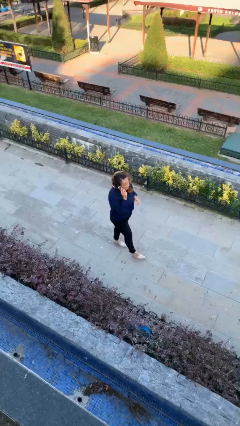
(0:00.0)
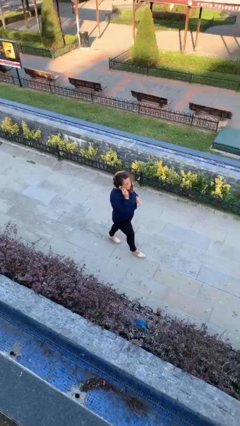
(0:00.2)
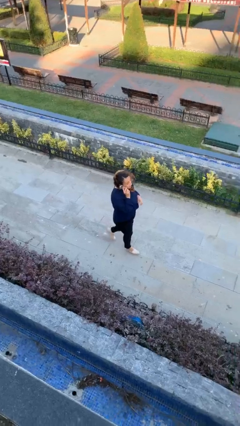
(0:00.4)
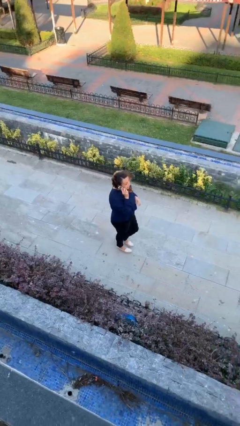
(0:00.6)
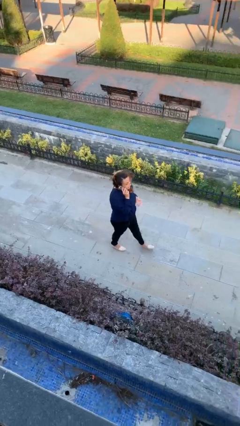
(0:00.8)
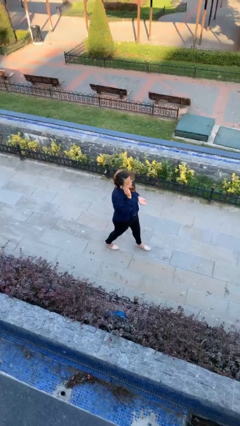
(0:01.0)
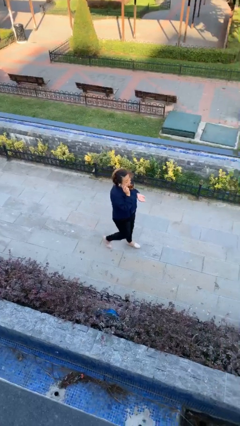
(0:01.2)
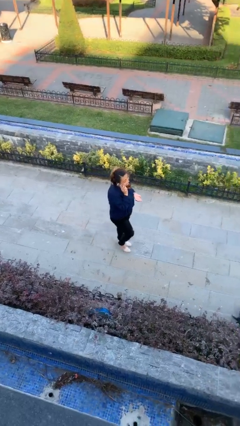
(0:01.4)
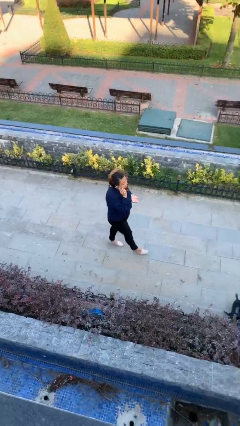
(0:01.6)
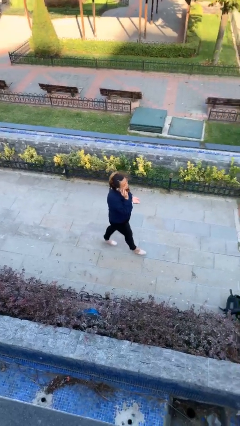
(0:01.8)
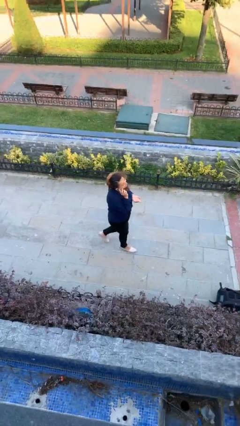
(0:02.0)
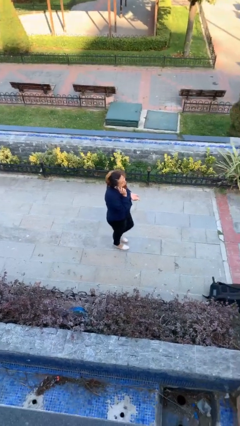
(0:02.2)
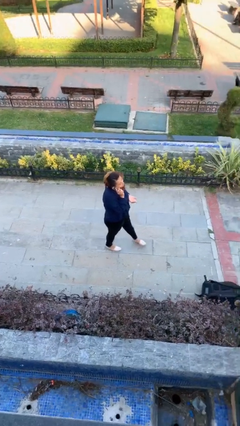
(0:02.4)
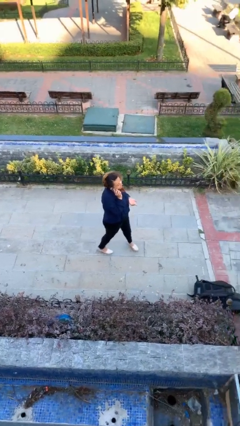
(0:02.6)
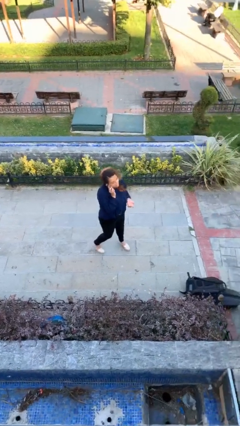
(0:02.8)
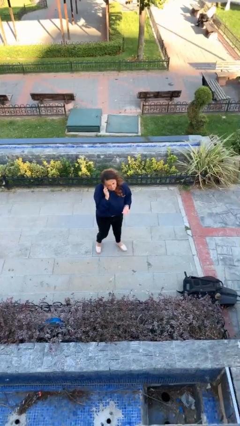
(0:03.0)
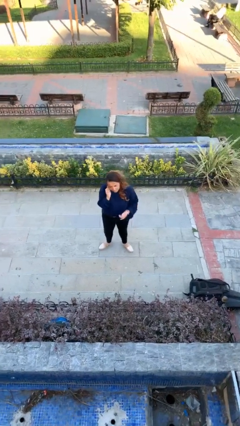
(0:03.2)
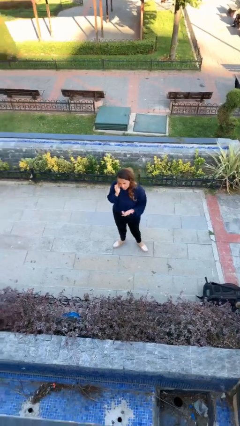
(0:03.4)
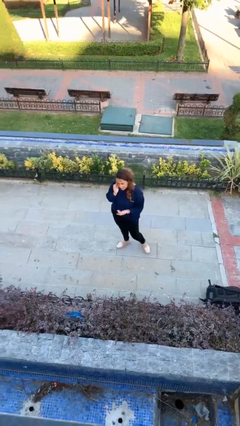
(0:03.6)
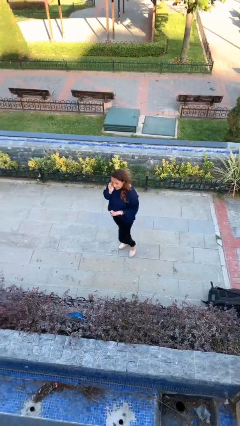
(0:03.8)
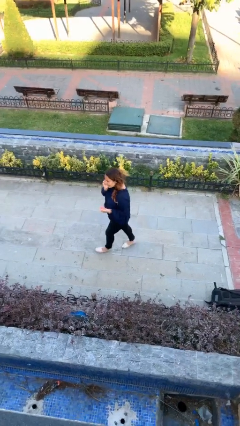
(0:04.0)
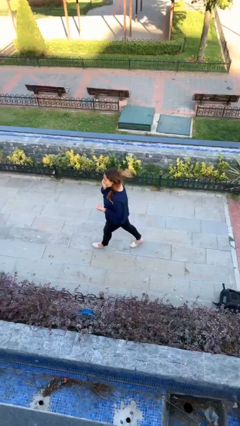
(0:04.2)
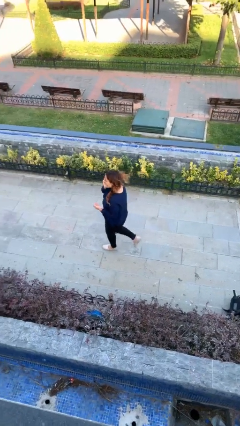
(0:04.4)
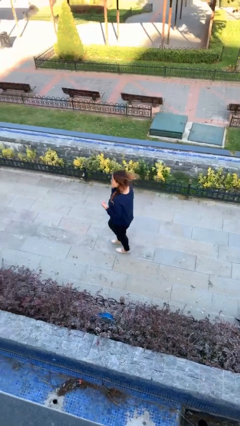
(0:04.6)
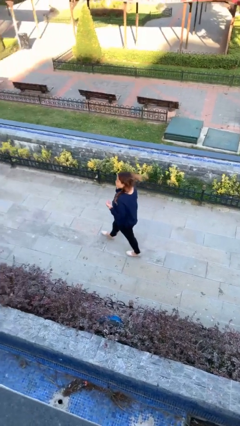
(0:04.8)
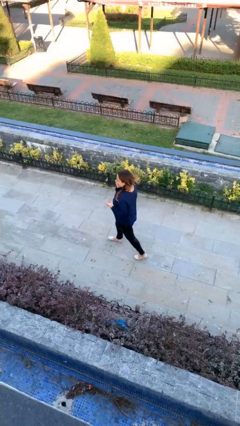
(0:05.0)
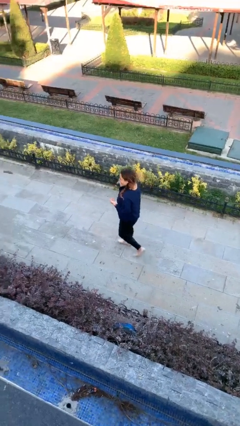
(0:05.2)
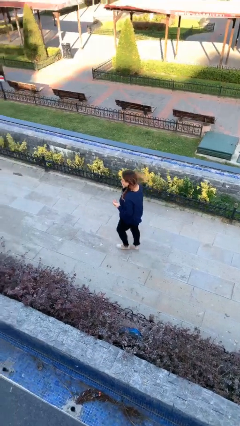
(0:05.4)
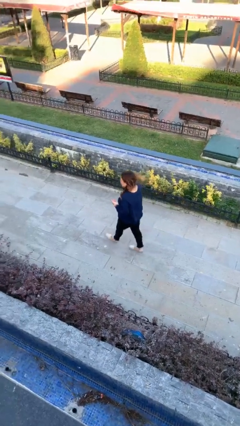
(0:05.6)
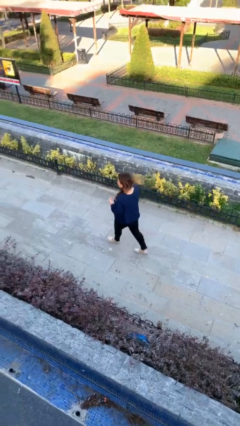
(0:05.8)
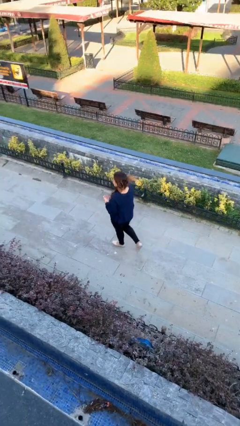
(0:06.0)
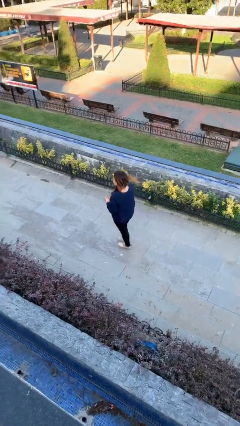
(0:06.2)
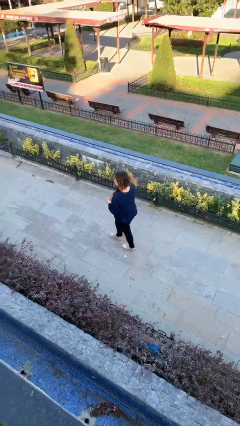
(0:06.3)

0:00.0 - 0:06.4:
person talks on phone

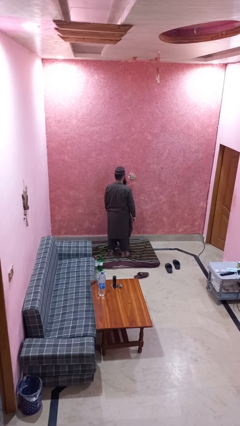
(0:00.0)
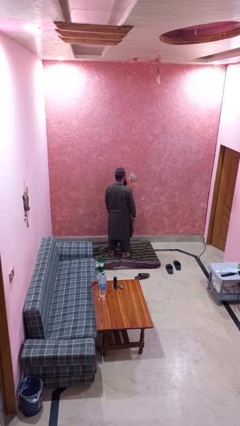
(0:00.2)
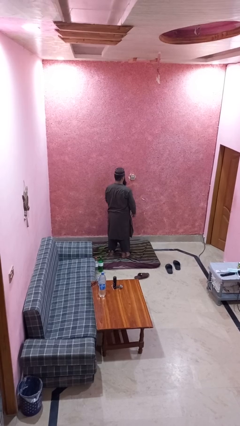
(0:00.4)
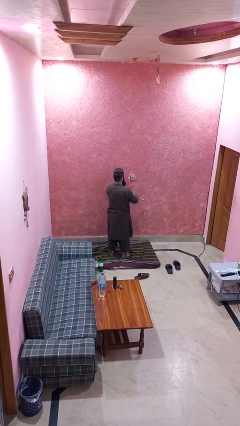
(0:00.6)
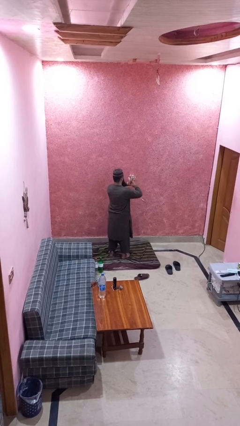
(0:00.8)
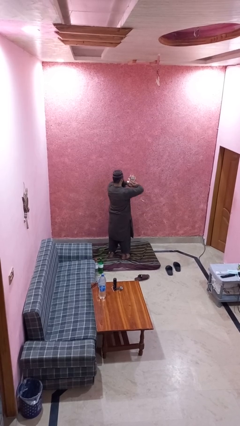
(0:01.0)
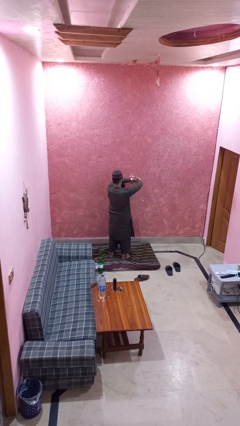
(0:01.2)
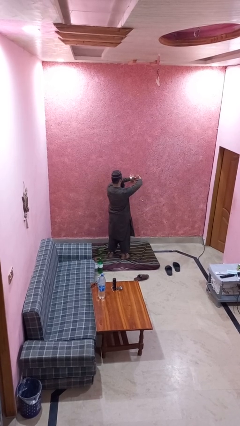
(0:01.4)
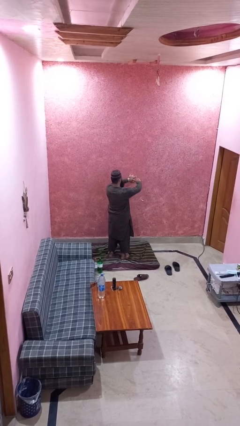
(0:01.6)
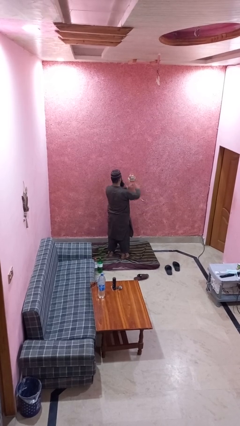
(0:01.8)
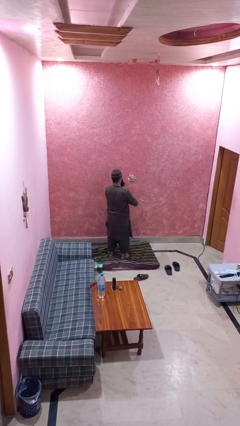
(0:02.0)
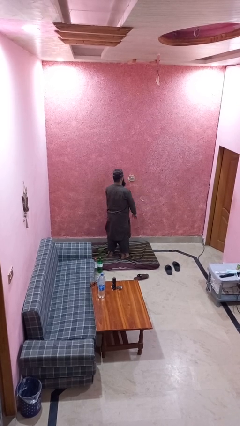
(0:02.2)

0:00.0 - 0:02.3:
person snaps fingers

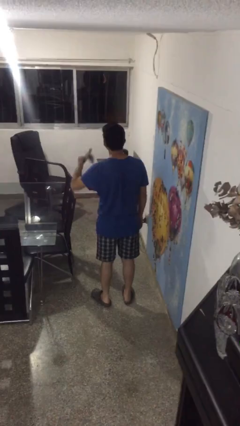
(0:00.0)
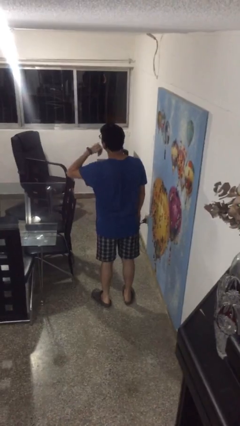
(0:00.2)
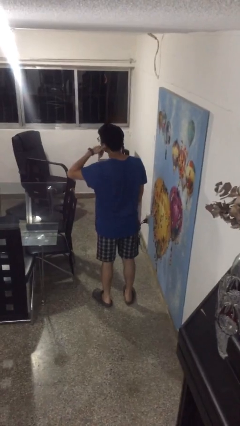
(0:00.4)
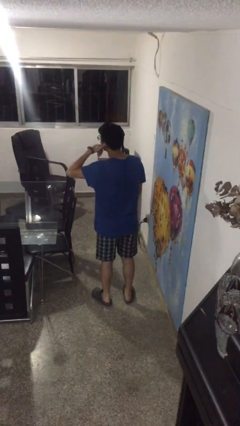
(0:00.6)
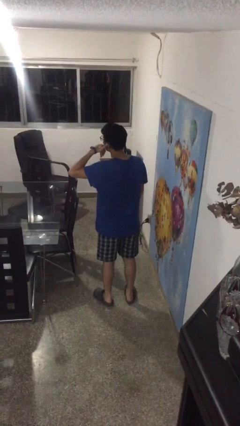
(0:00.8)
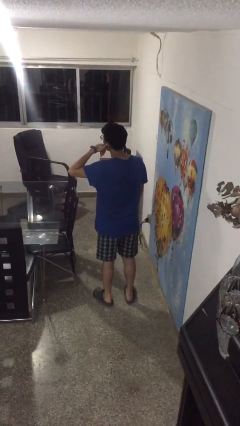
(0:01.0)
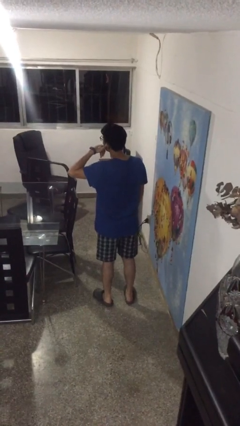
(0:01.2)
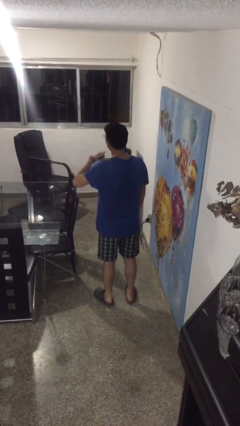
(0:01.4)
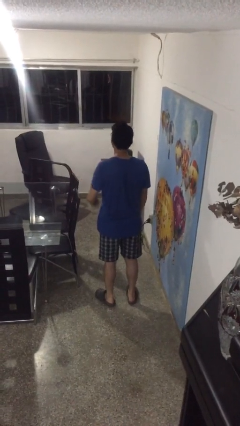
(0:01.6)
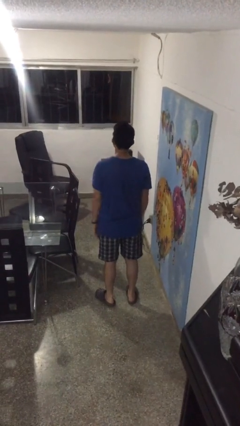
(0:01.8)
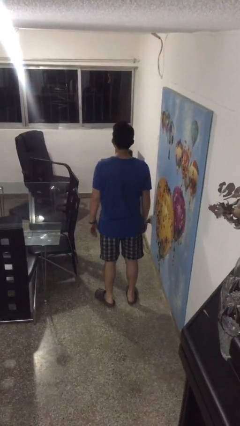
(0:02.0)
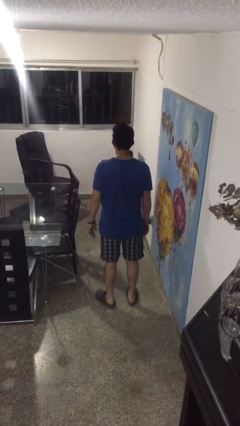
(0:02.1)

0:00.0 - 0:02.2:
person gestures call me

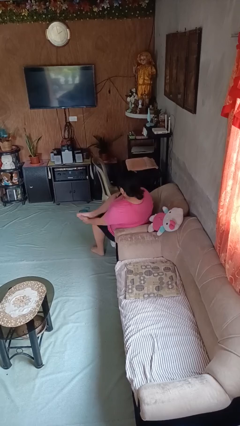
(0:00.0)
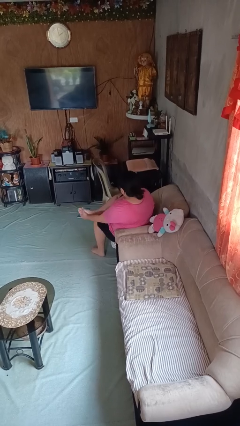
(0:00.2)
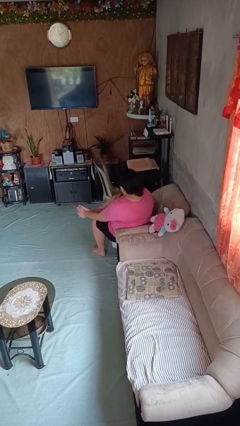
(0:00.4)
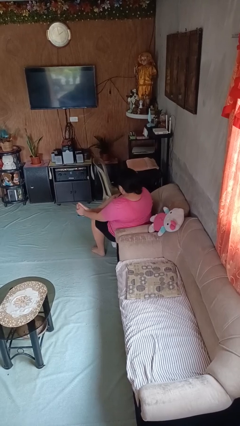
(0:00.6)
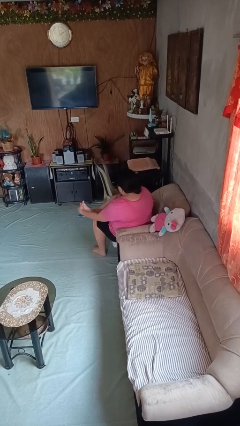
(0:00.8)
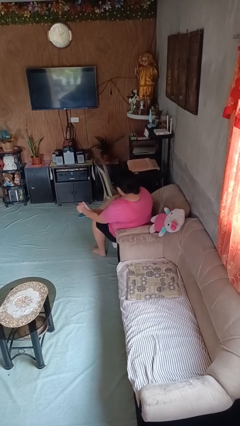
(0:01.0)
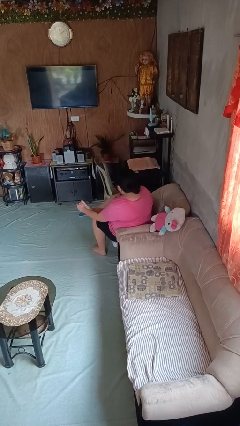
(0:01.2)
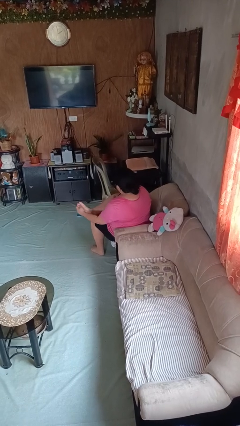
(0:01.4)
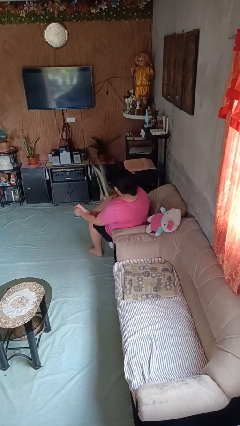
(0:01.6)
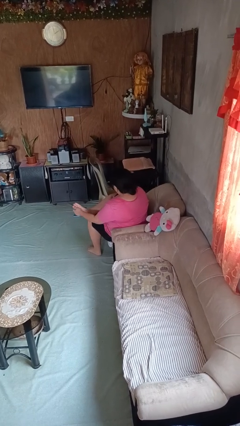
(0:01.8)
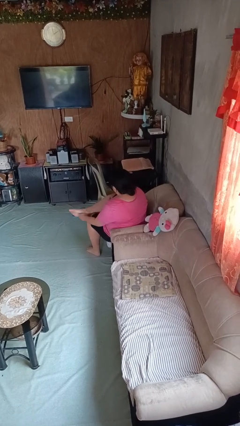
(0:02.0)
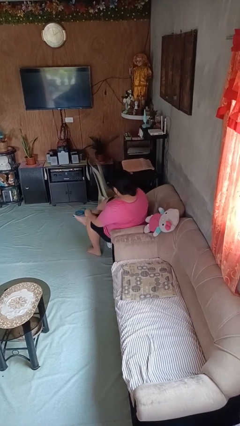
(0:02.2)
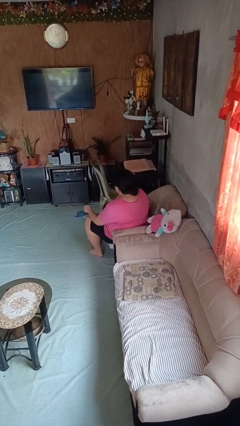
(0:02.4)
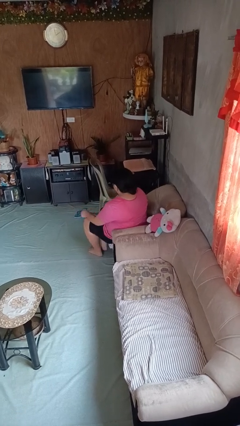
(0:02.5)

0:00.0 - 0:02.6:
person rubs foot

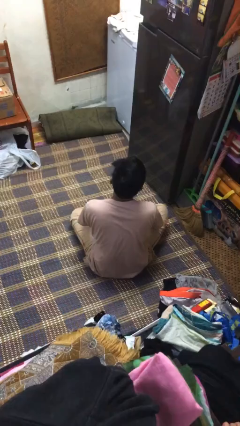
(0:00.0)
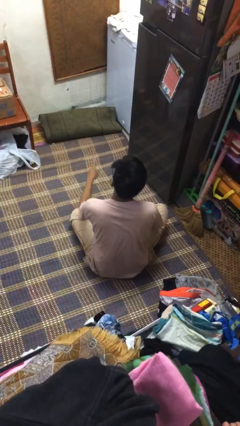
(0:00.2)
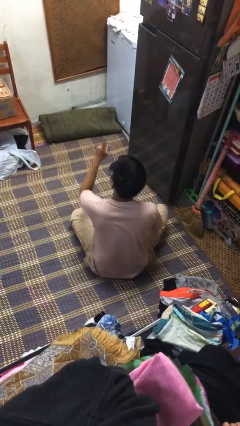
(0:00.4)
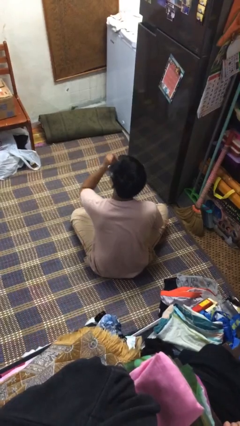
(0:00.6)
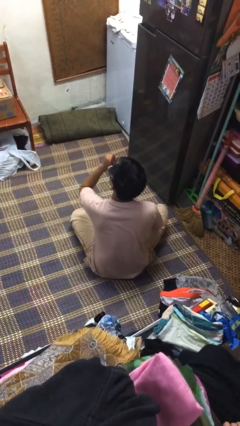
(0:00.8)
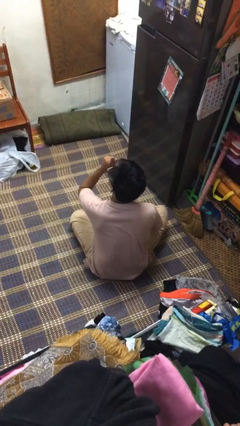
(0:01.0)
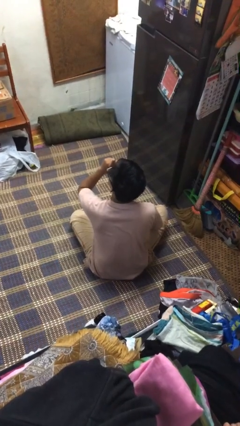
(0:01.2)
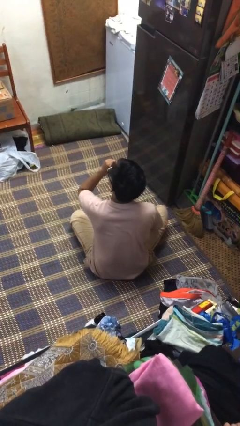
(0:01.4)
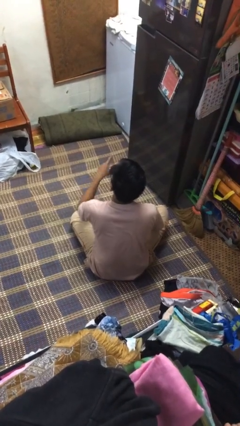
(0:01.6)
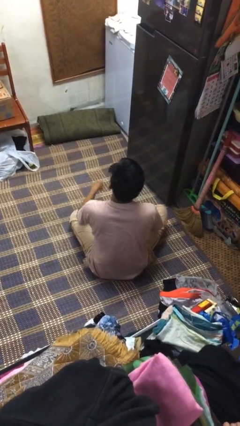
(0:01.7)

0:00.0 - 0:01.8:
person gestures be quiet

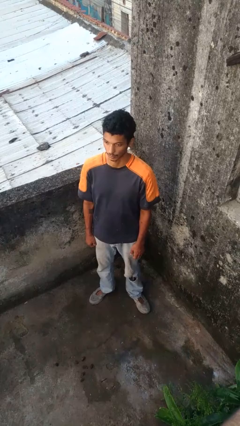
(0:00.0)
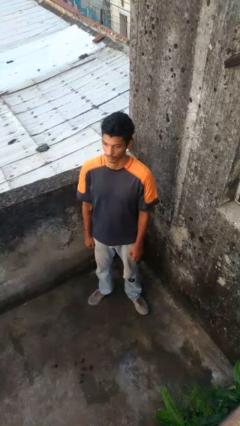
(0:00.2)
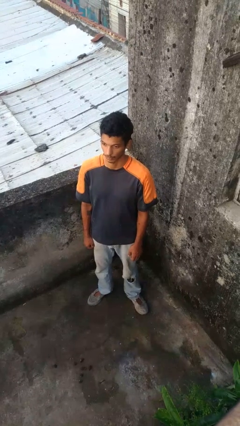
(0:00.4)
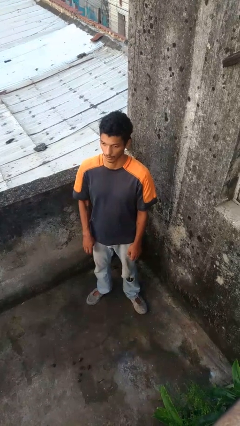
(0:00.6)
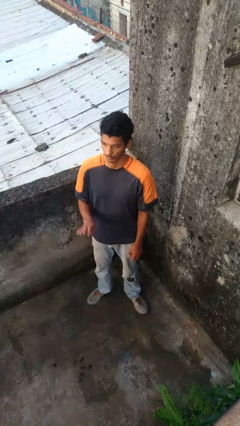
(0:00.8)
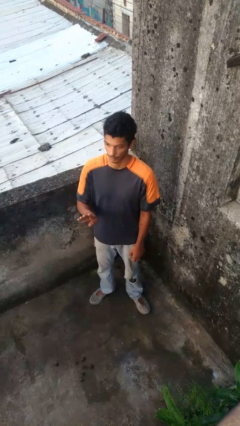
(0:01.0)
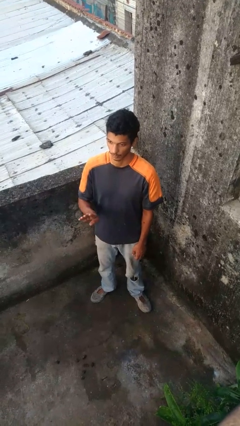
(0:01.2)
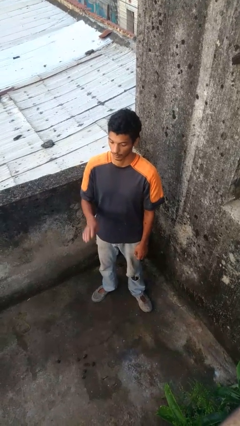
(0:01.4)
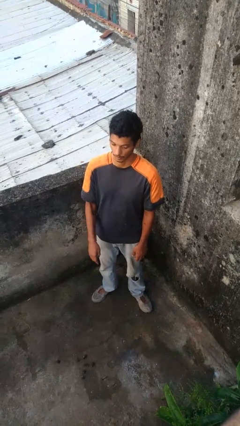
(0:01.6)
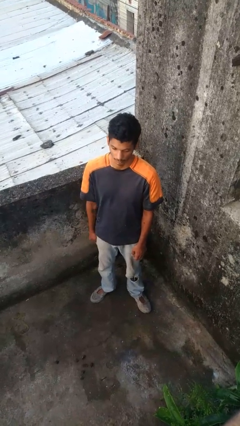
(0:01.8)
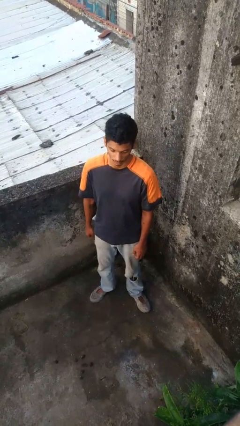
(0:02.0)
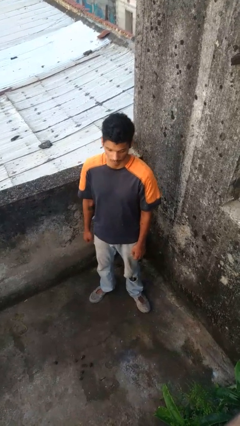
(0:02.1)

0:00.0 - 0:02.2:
person gestures number four
